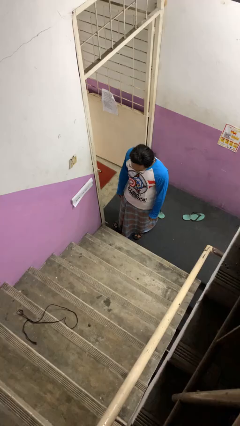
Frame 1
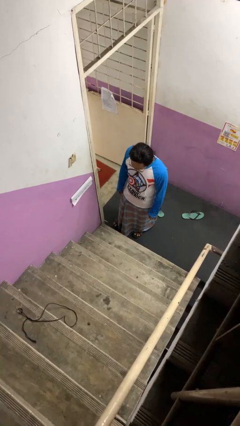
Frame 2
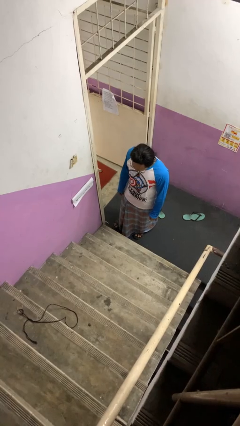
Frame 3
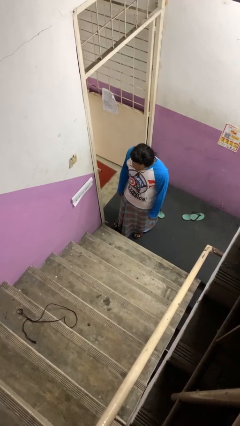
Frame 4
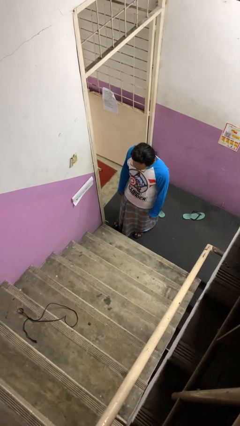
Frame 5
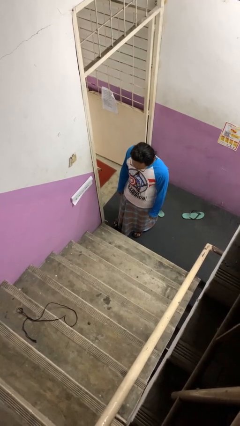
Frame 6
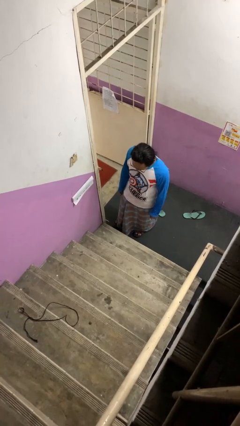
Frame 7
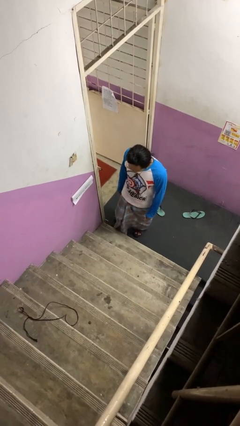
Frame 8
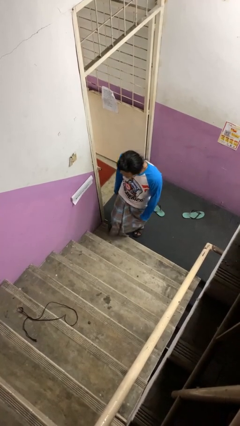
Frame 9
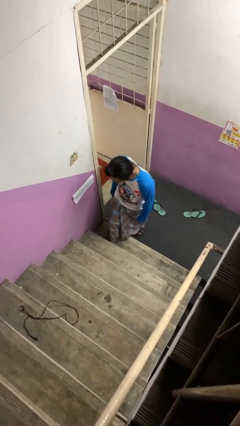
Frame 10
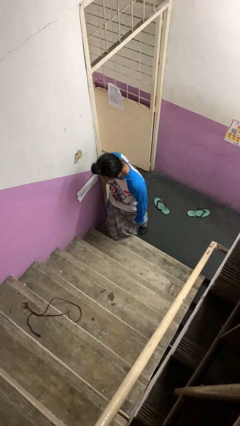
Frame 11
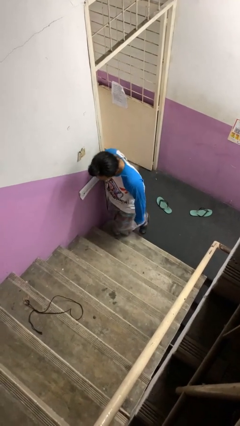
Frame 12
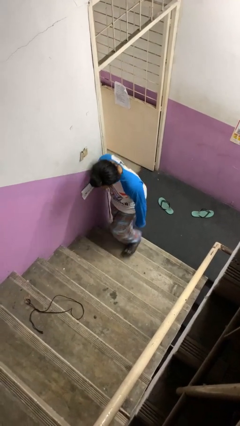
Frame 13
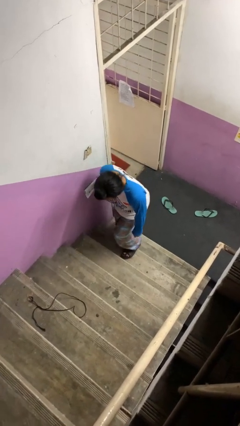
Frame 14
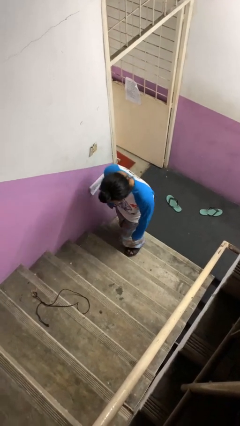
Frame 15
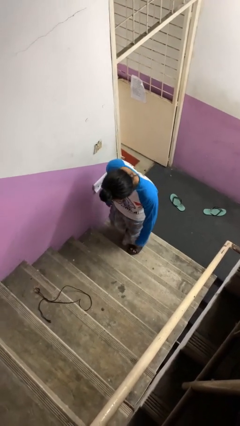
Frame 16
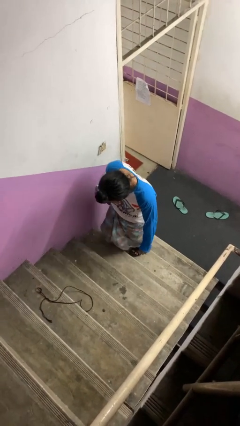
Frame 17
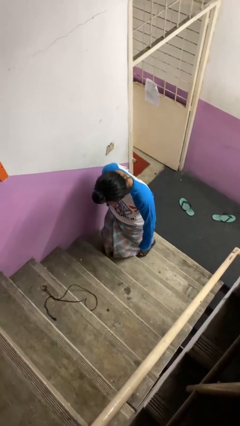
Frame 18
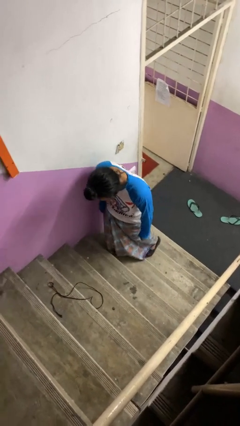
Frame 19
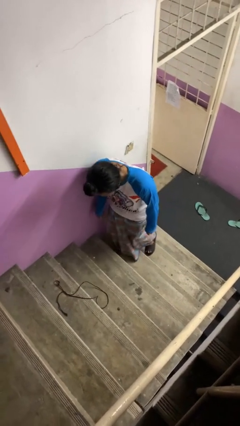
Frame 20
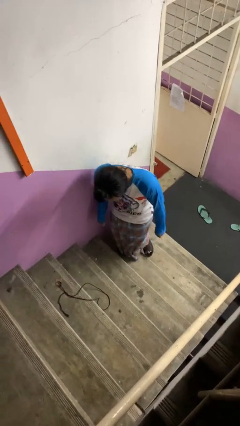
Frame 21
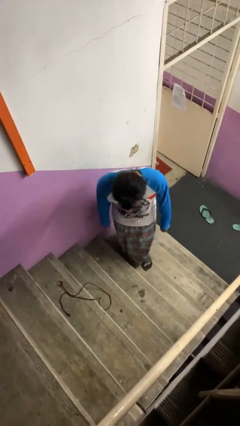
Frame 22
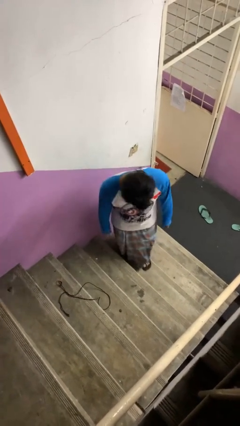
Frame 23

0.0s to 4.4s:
person climbs up stairs

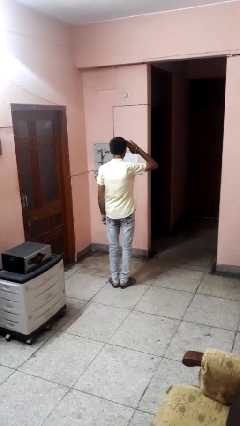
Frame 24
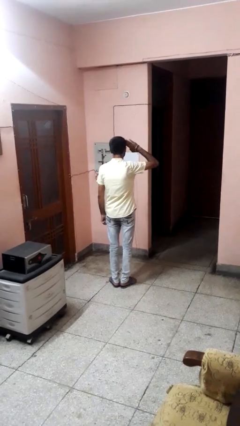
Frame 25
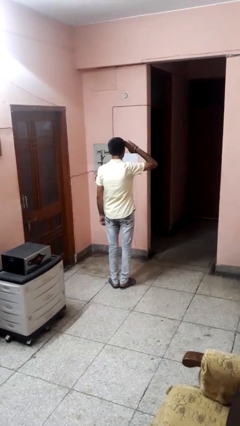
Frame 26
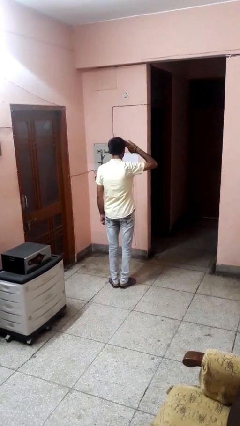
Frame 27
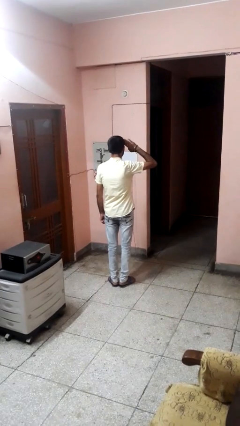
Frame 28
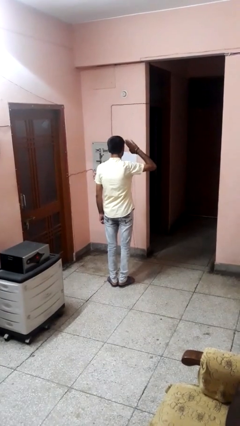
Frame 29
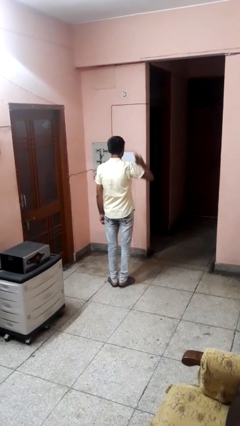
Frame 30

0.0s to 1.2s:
person salutes

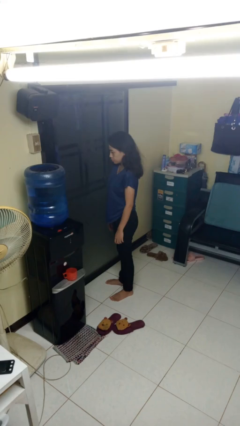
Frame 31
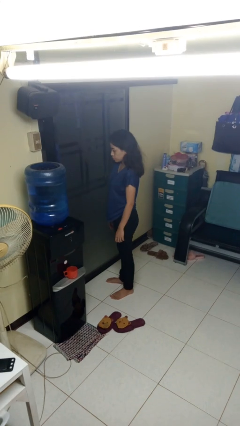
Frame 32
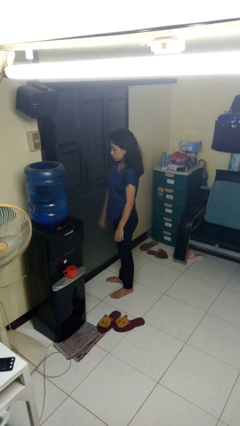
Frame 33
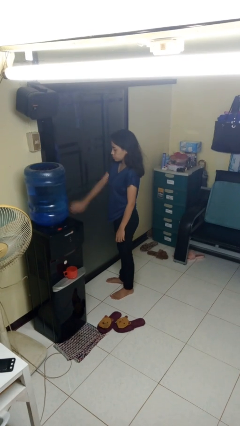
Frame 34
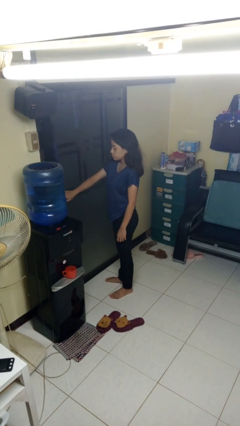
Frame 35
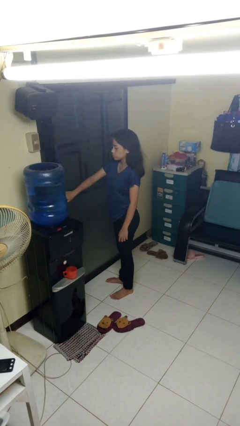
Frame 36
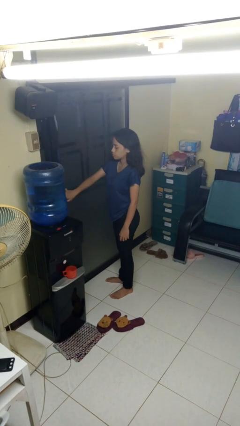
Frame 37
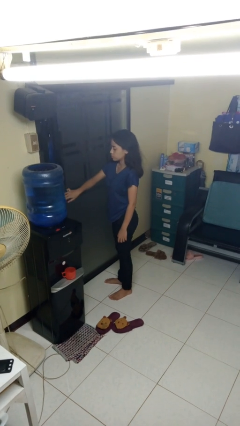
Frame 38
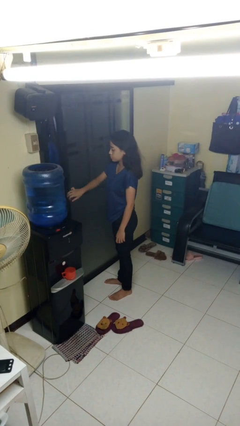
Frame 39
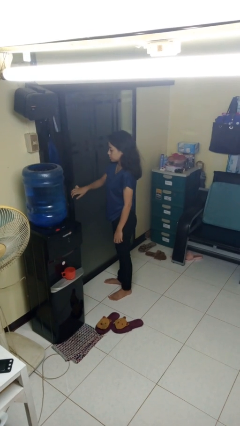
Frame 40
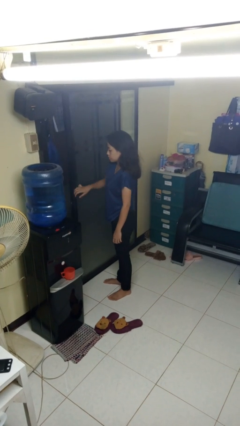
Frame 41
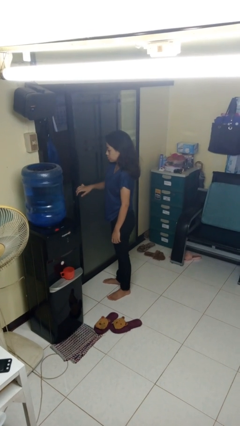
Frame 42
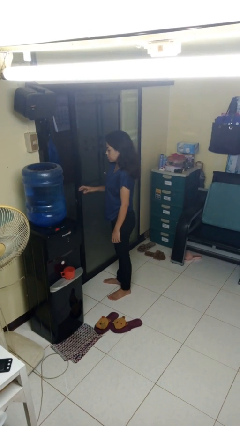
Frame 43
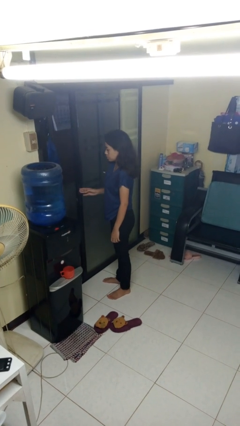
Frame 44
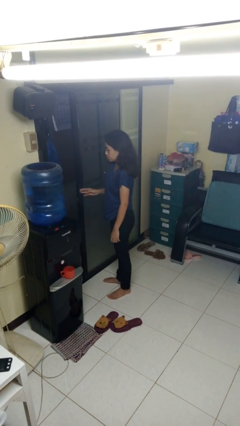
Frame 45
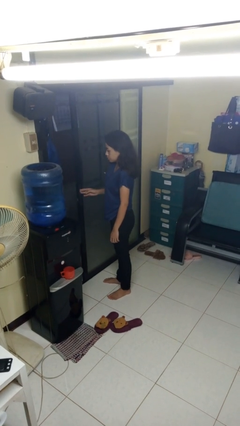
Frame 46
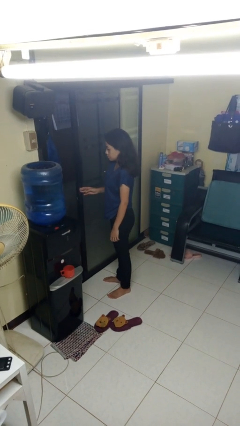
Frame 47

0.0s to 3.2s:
person opens sliding door

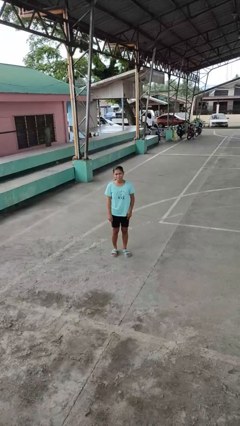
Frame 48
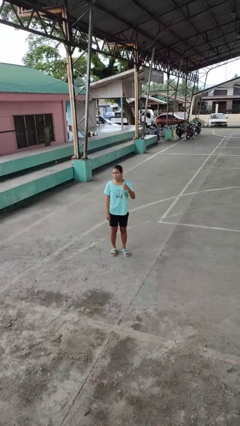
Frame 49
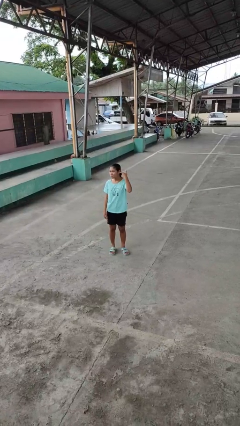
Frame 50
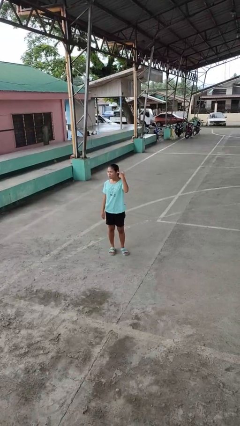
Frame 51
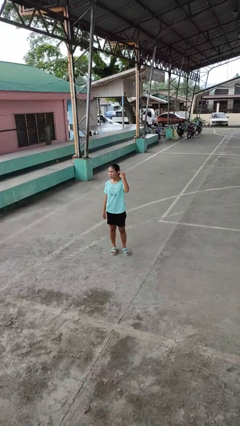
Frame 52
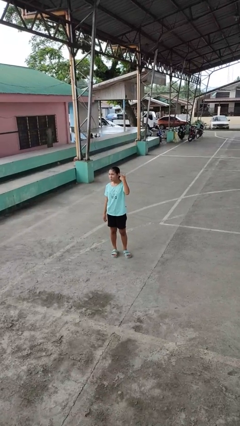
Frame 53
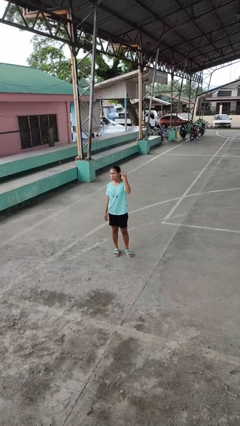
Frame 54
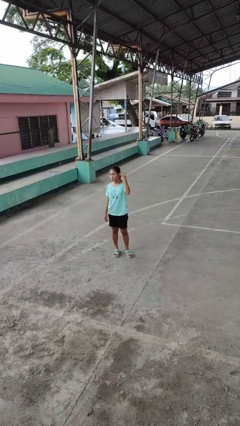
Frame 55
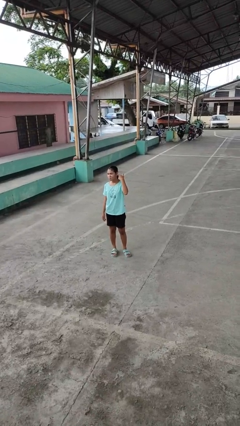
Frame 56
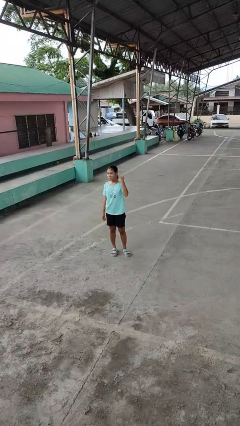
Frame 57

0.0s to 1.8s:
person gestures listen closely

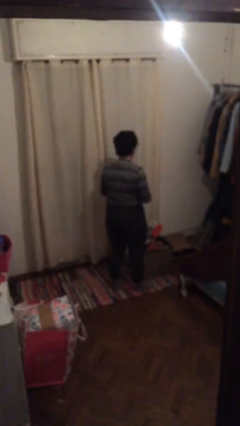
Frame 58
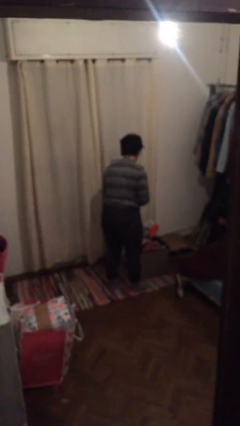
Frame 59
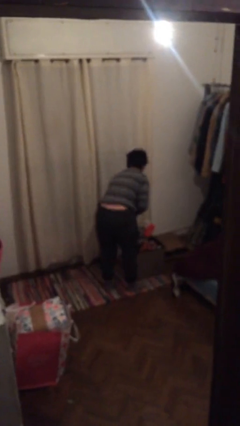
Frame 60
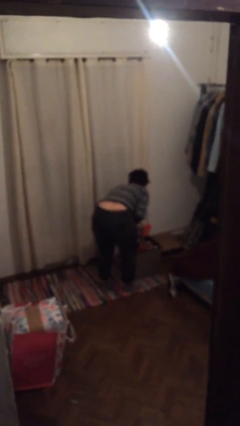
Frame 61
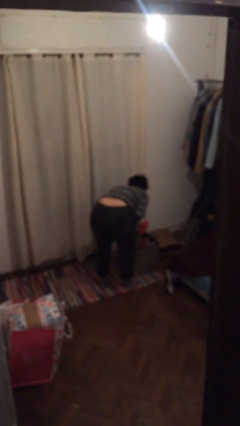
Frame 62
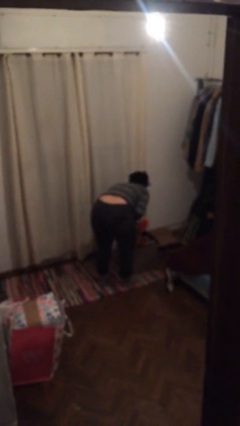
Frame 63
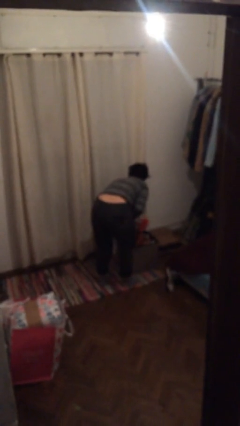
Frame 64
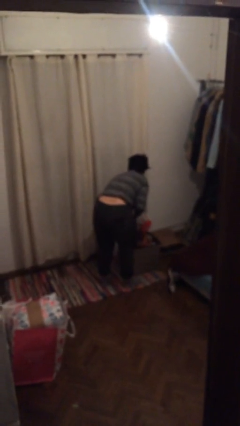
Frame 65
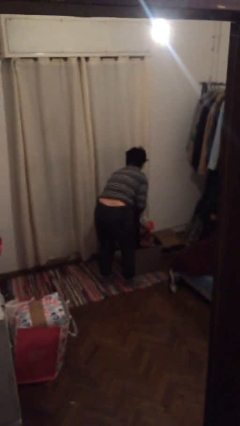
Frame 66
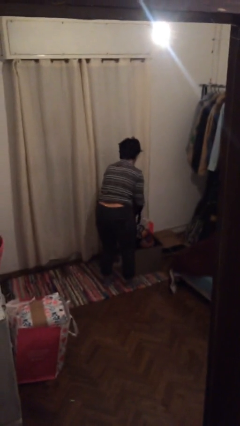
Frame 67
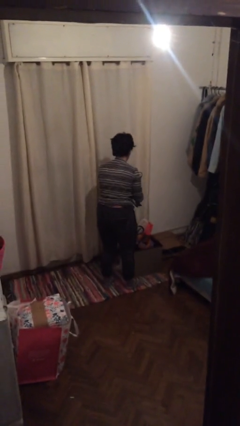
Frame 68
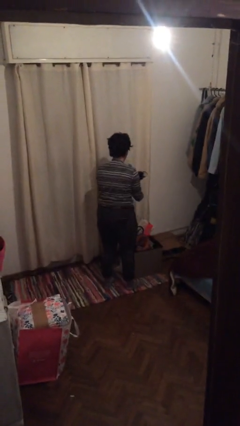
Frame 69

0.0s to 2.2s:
person takes object from basket

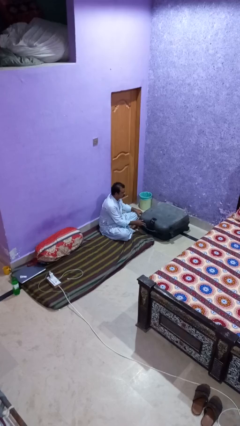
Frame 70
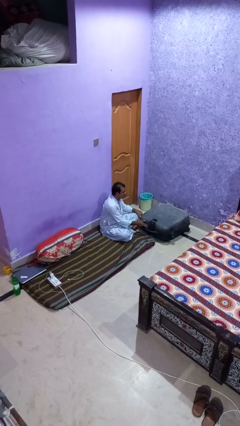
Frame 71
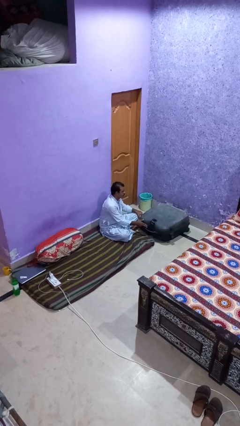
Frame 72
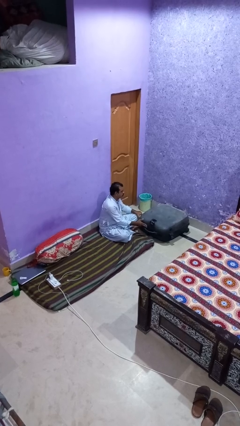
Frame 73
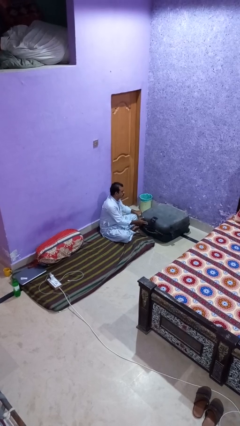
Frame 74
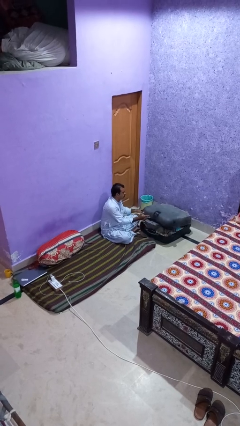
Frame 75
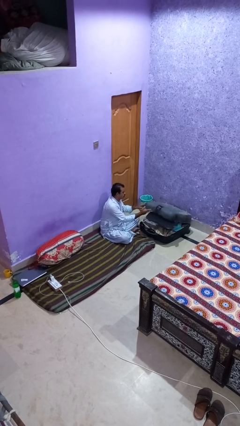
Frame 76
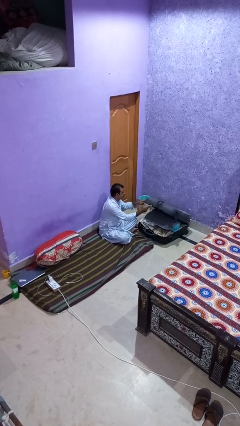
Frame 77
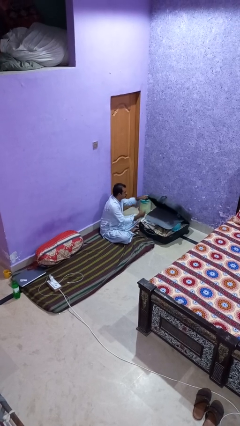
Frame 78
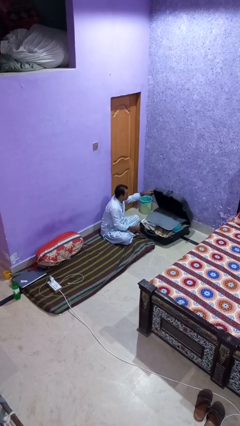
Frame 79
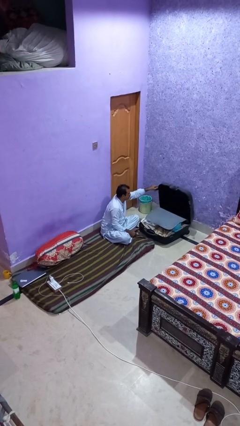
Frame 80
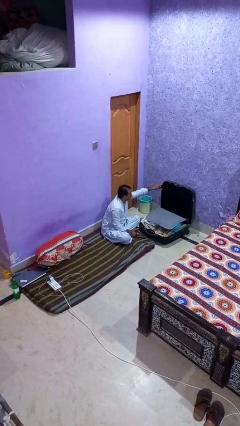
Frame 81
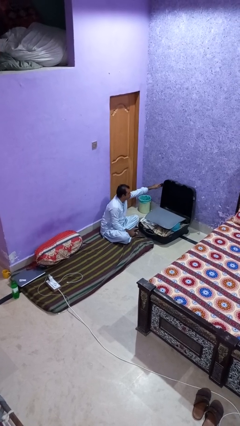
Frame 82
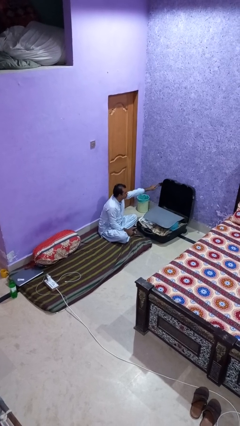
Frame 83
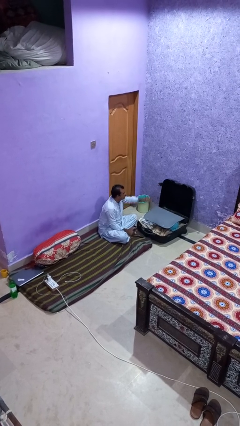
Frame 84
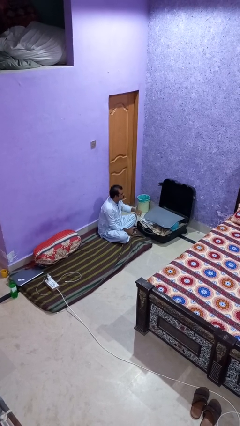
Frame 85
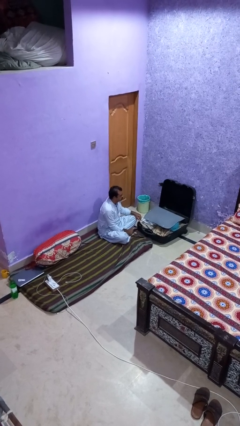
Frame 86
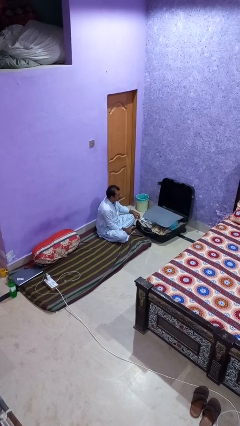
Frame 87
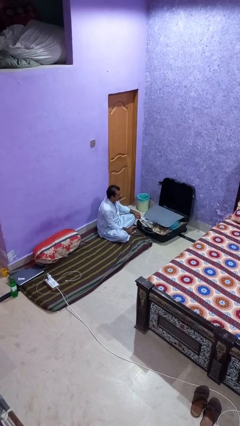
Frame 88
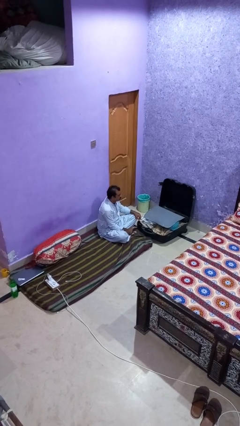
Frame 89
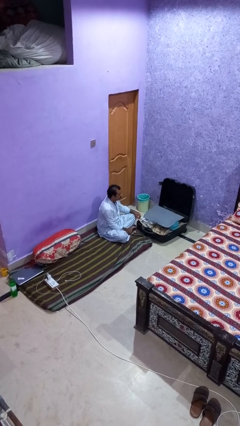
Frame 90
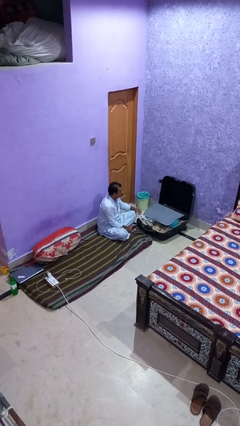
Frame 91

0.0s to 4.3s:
person opens suitcase

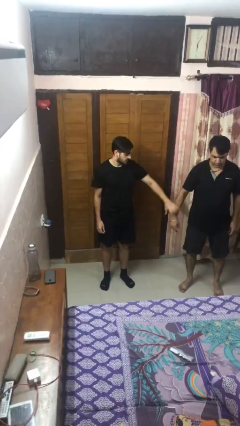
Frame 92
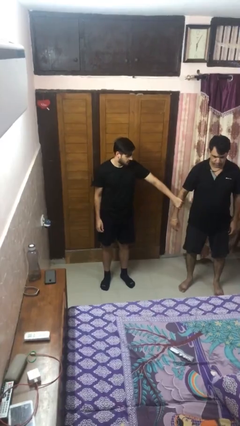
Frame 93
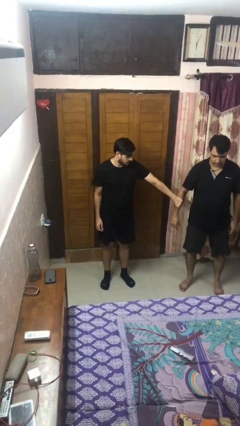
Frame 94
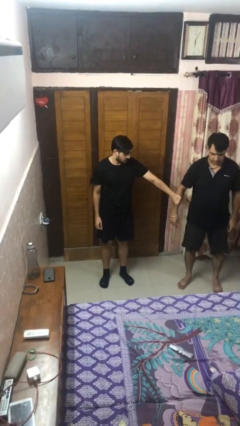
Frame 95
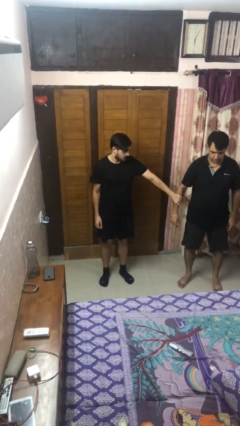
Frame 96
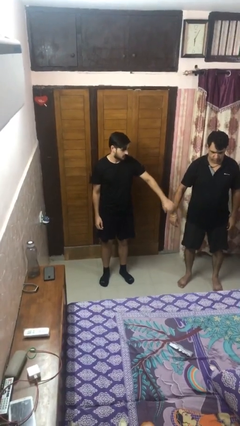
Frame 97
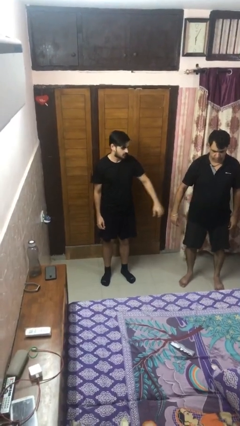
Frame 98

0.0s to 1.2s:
person grabs person by forearm
